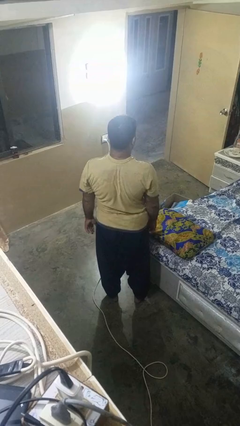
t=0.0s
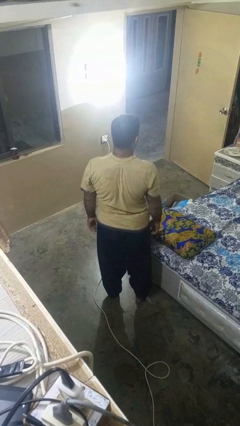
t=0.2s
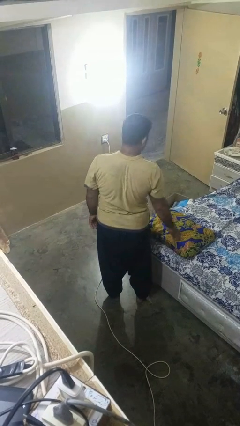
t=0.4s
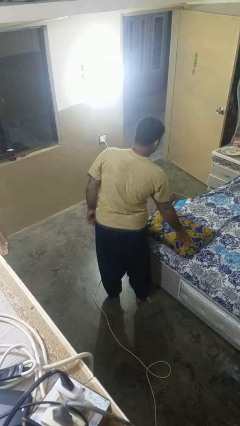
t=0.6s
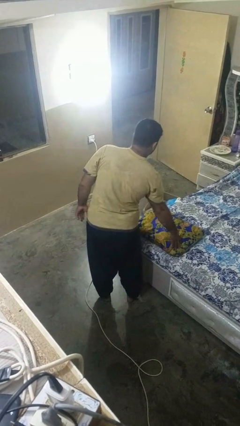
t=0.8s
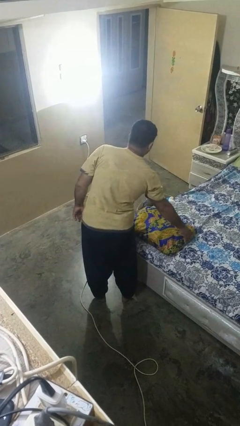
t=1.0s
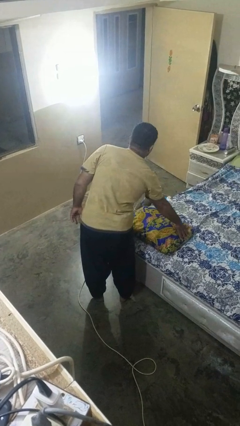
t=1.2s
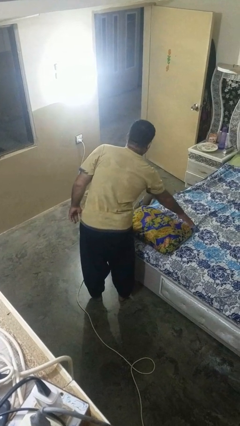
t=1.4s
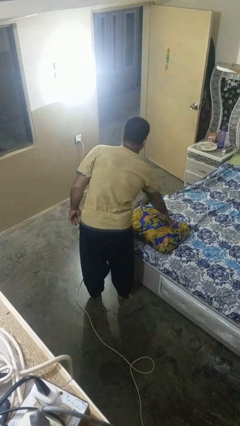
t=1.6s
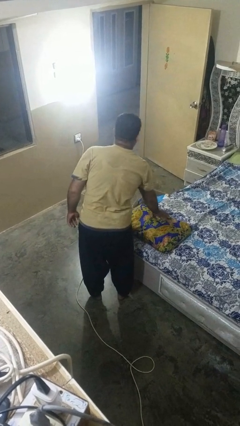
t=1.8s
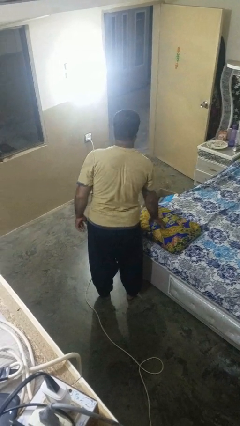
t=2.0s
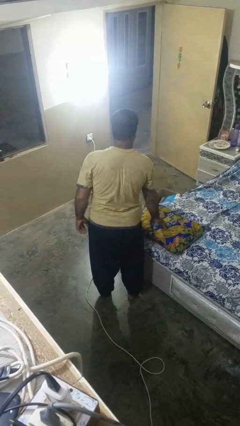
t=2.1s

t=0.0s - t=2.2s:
person taps object with finger

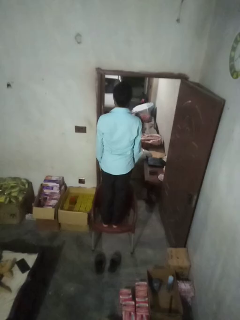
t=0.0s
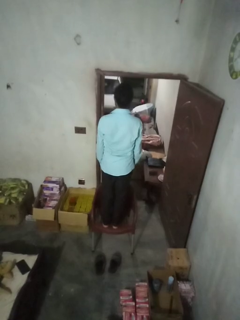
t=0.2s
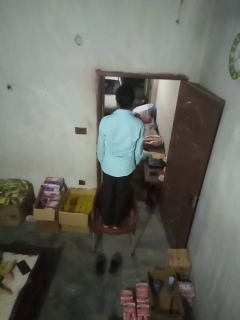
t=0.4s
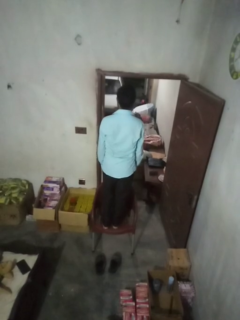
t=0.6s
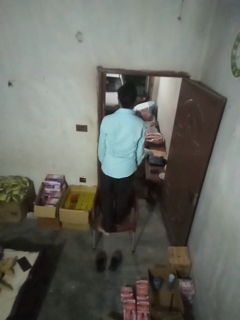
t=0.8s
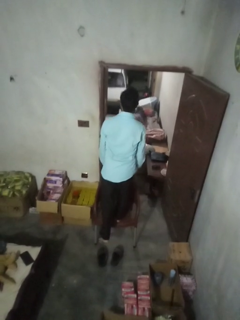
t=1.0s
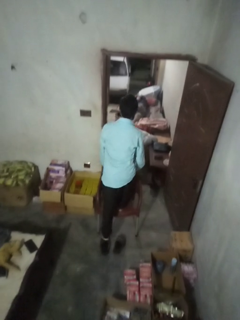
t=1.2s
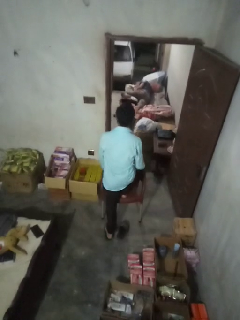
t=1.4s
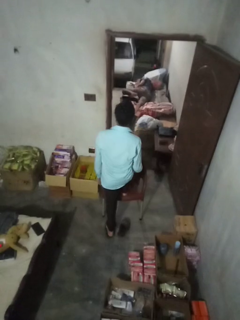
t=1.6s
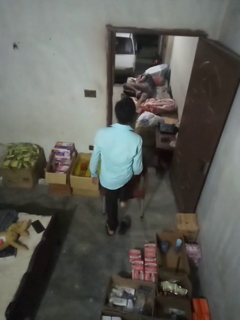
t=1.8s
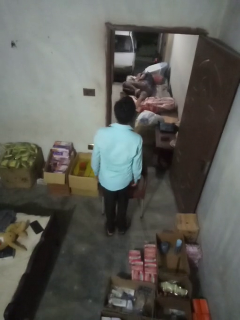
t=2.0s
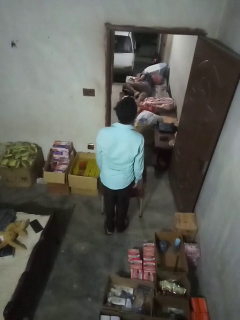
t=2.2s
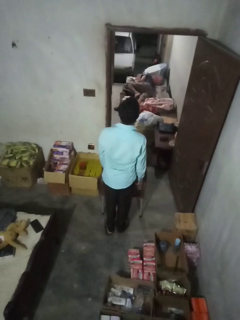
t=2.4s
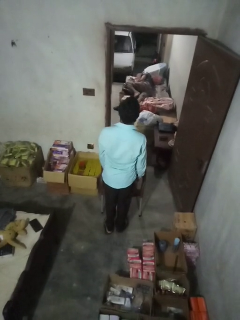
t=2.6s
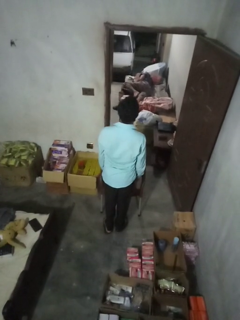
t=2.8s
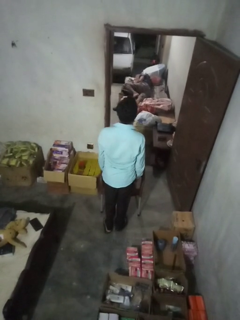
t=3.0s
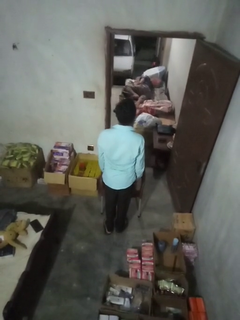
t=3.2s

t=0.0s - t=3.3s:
person climbs off chair

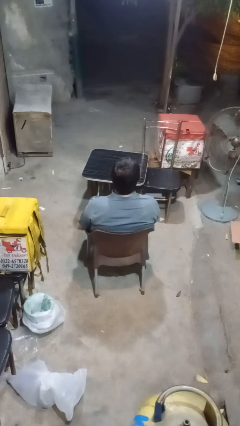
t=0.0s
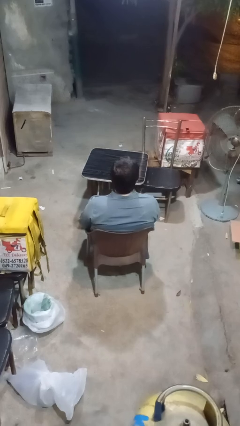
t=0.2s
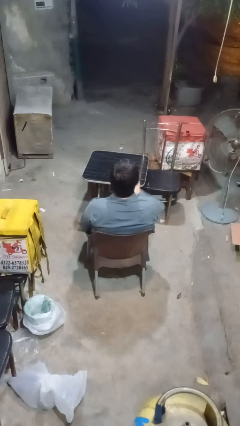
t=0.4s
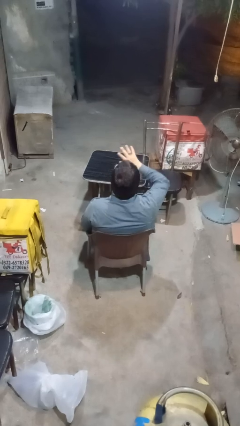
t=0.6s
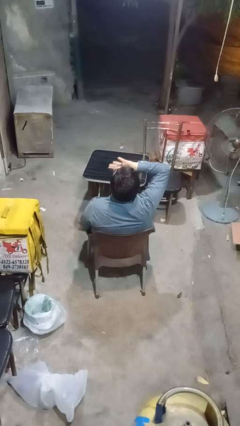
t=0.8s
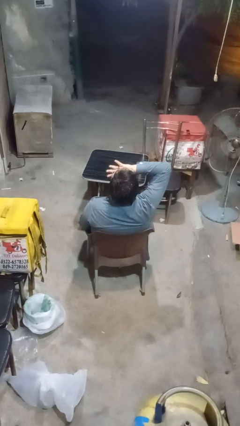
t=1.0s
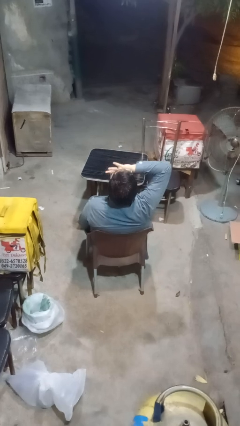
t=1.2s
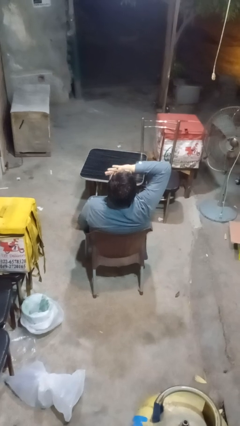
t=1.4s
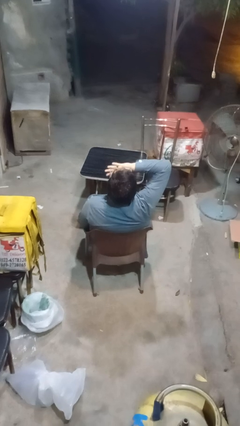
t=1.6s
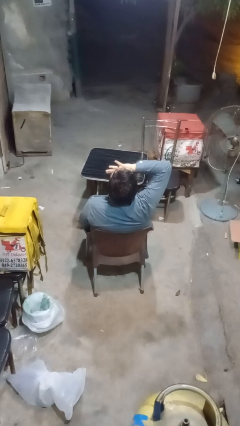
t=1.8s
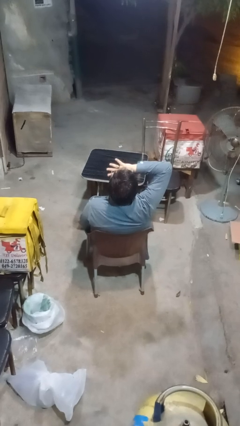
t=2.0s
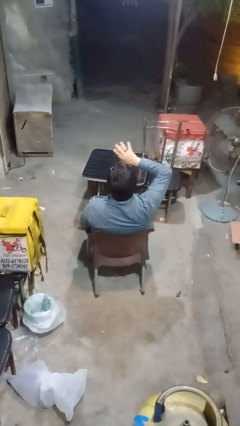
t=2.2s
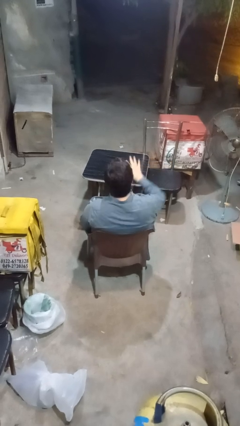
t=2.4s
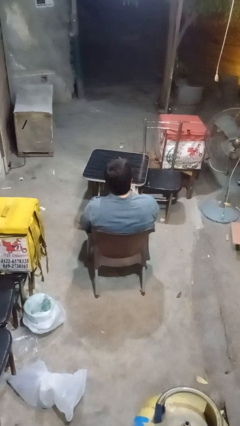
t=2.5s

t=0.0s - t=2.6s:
person yawns

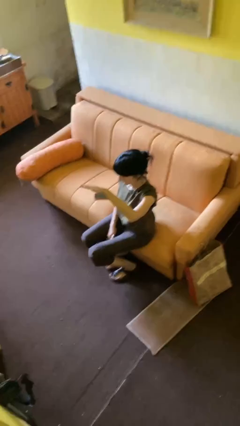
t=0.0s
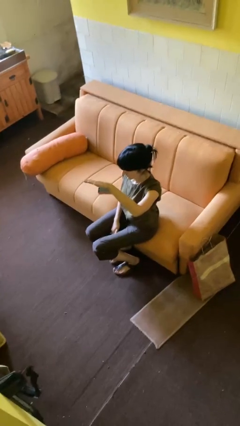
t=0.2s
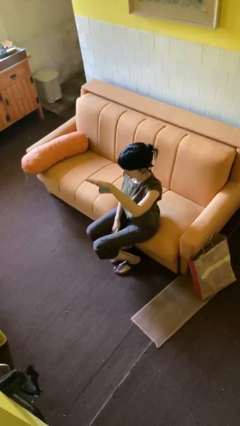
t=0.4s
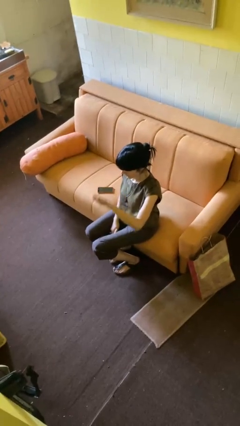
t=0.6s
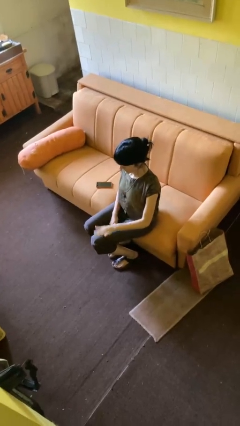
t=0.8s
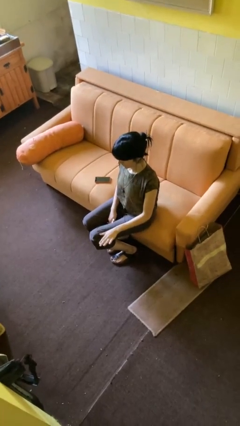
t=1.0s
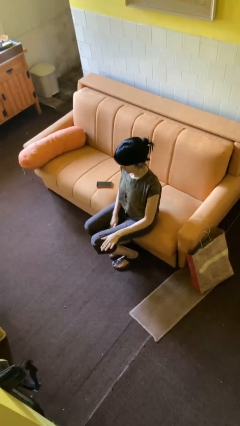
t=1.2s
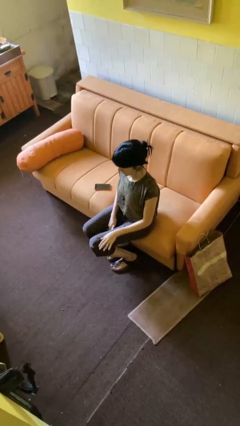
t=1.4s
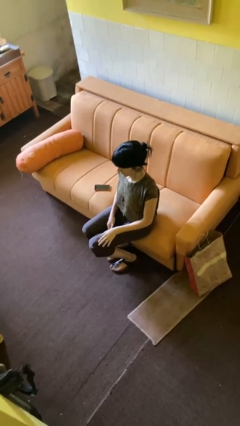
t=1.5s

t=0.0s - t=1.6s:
person gestures swipe down

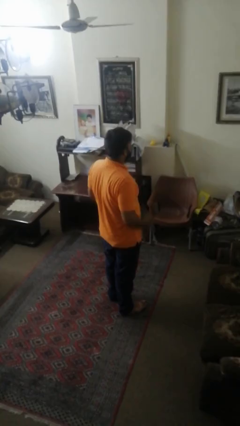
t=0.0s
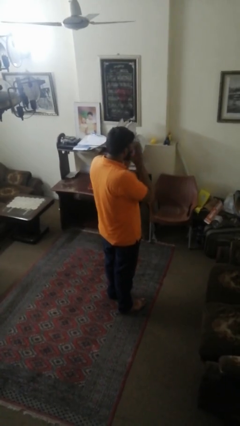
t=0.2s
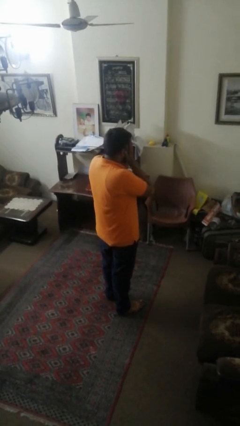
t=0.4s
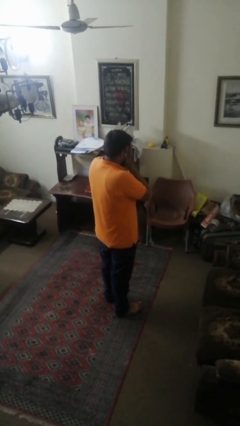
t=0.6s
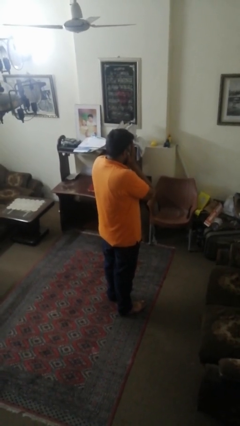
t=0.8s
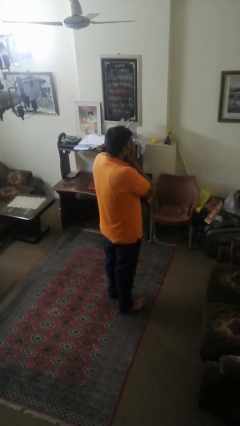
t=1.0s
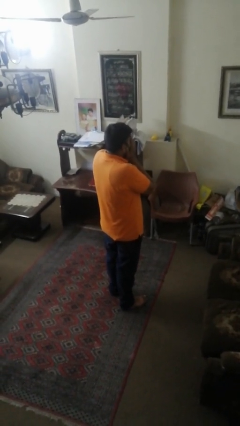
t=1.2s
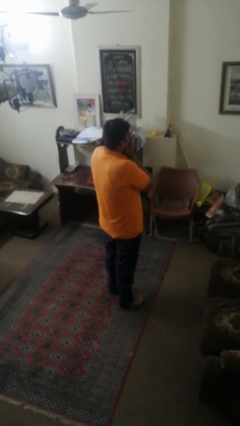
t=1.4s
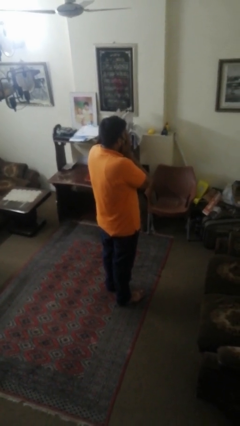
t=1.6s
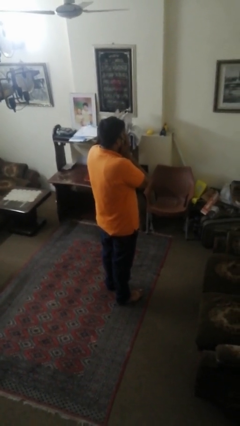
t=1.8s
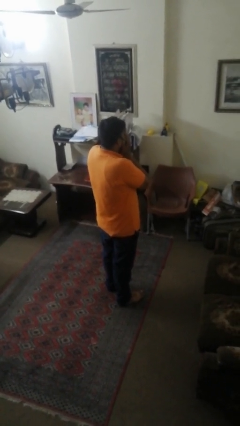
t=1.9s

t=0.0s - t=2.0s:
person covers face with hands

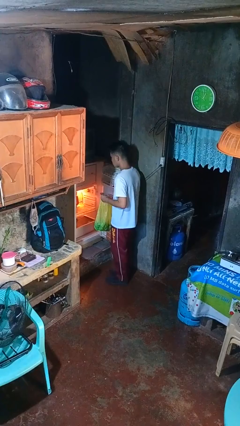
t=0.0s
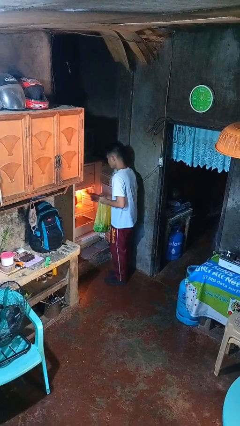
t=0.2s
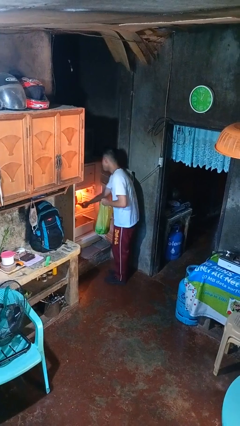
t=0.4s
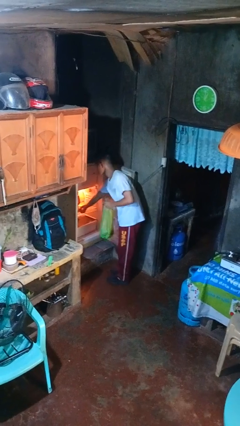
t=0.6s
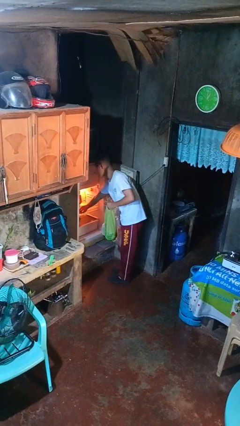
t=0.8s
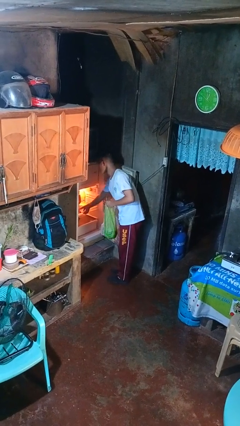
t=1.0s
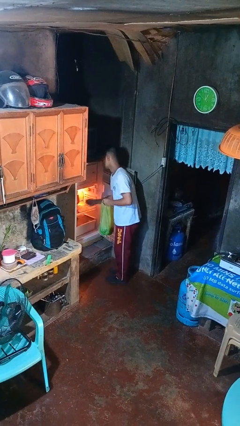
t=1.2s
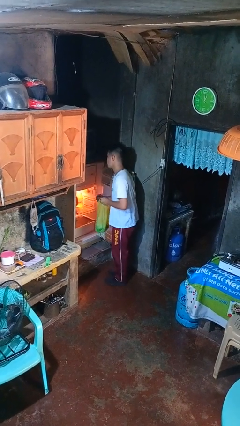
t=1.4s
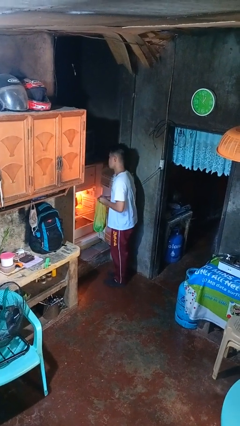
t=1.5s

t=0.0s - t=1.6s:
person loads groceries into refrigerator

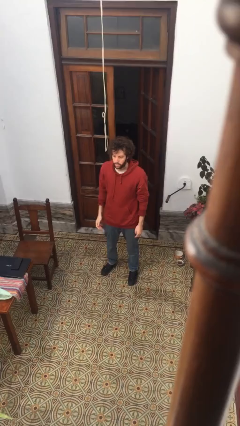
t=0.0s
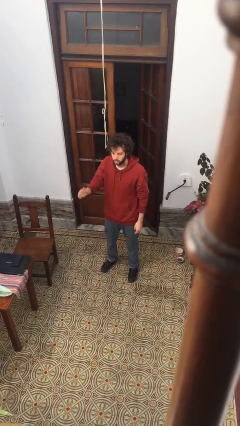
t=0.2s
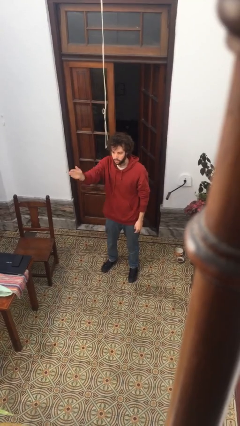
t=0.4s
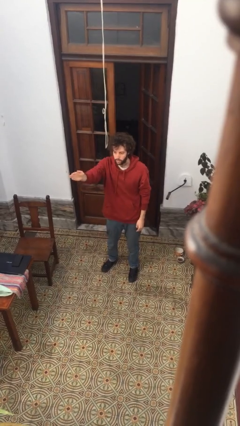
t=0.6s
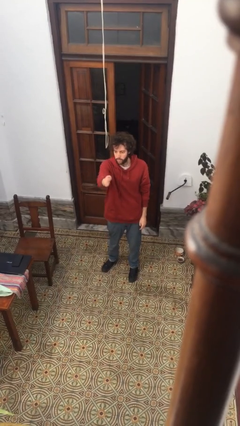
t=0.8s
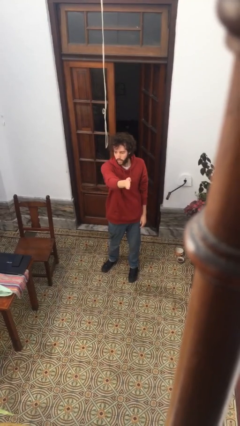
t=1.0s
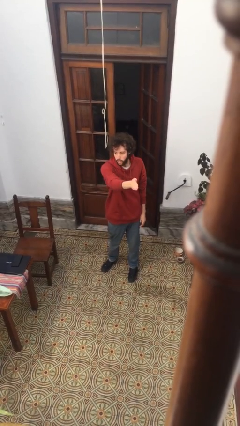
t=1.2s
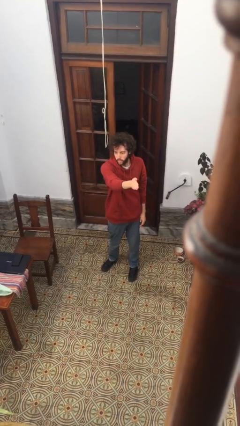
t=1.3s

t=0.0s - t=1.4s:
person gestures swipe left

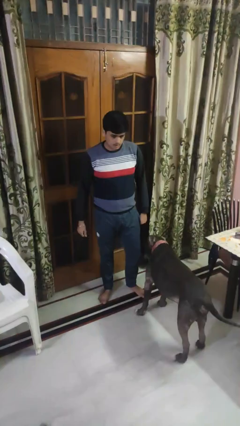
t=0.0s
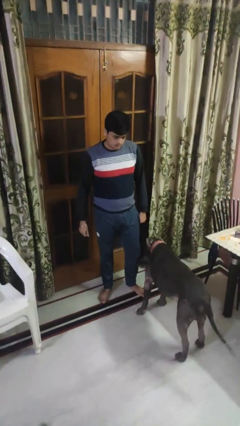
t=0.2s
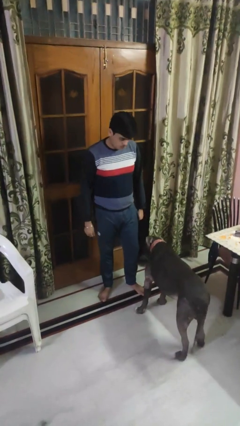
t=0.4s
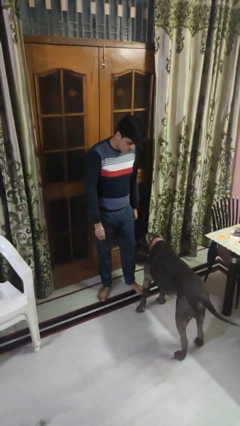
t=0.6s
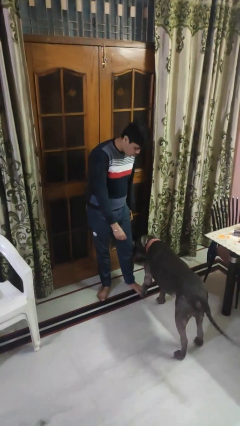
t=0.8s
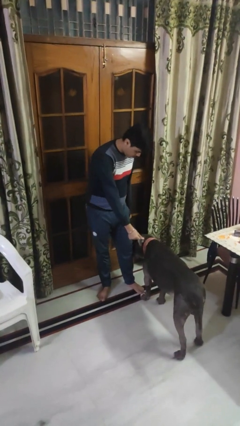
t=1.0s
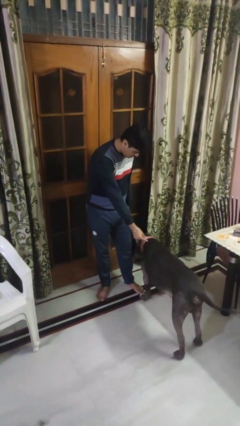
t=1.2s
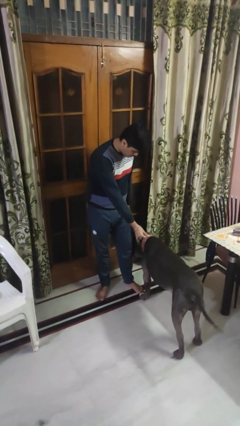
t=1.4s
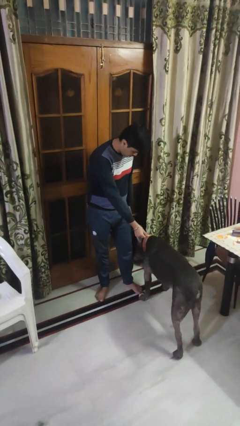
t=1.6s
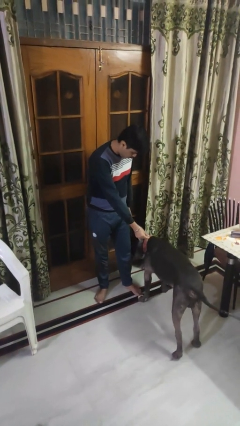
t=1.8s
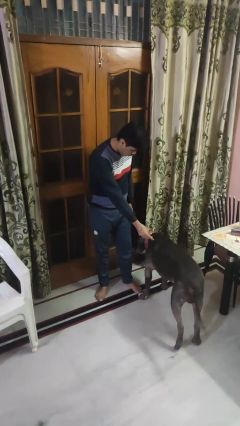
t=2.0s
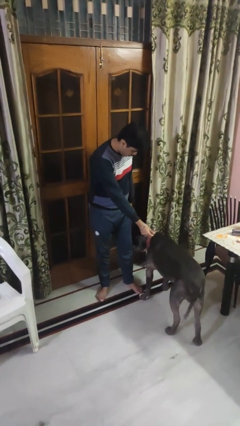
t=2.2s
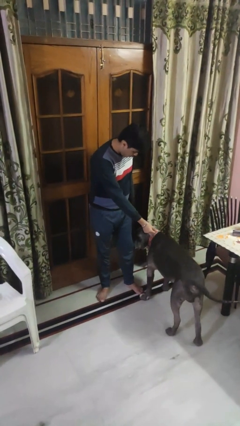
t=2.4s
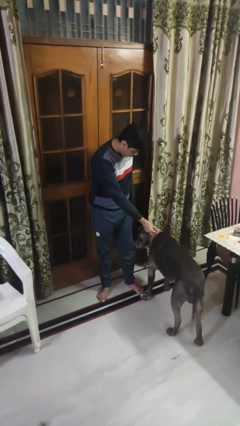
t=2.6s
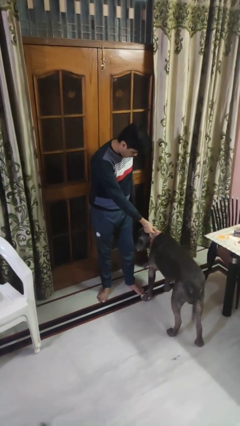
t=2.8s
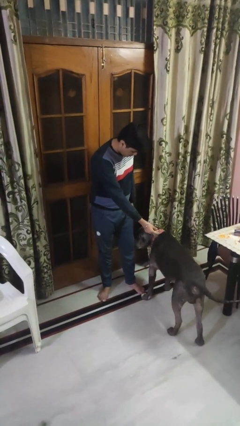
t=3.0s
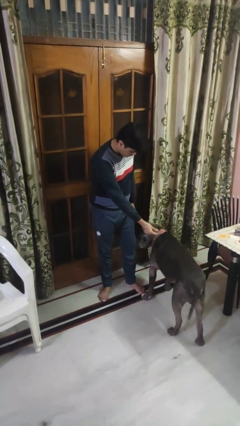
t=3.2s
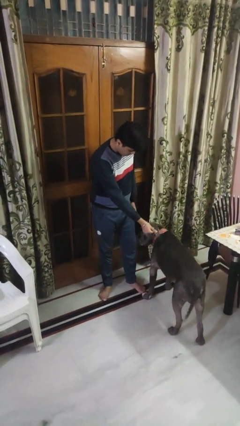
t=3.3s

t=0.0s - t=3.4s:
person points to dog
